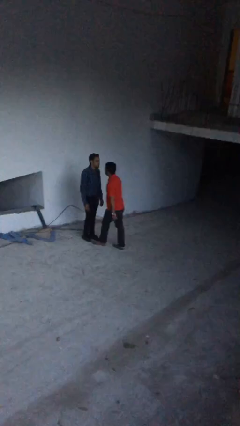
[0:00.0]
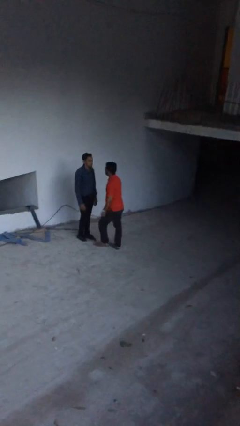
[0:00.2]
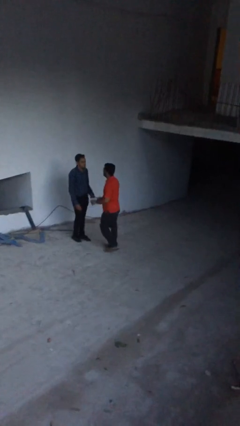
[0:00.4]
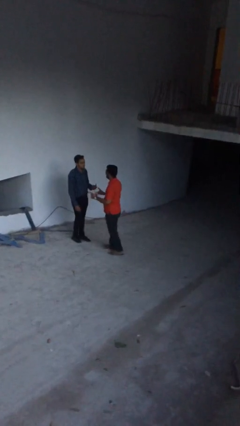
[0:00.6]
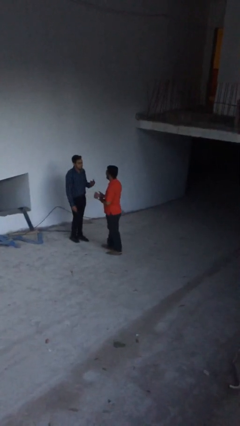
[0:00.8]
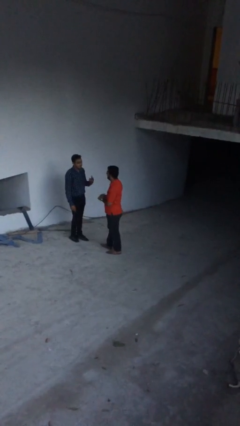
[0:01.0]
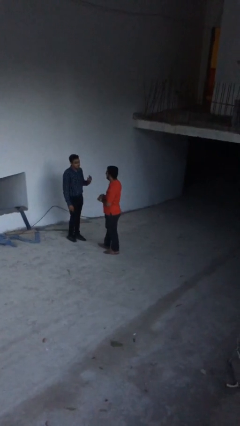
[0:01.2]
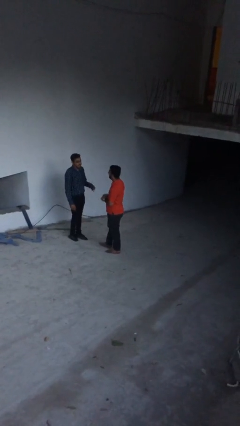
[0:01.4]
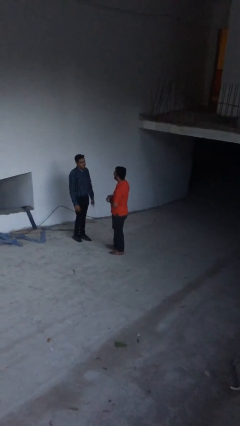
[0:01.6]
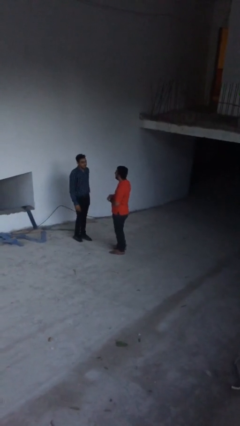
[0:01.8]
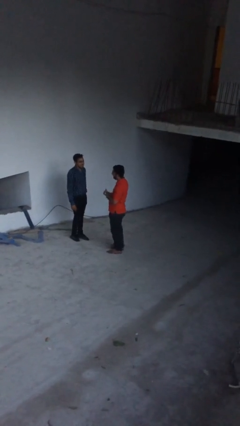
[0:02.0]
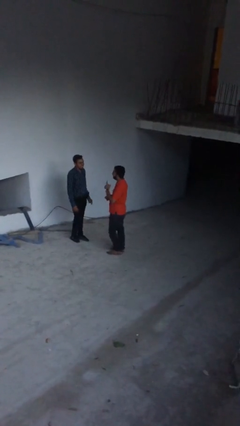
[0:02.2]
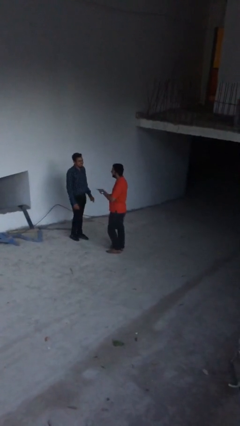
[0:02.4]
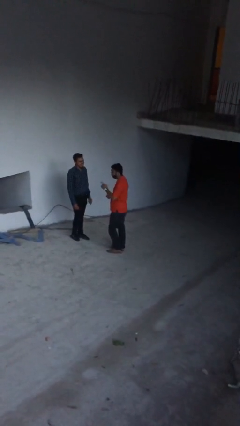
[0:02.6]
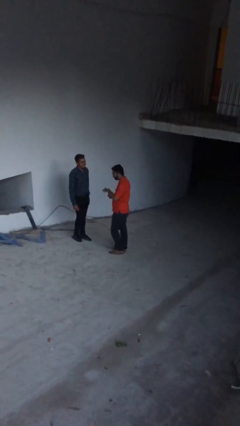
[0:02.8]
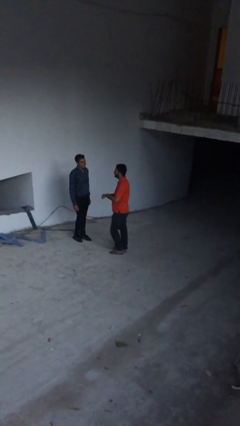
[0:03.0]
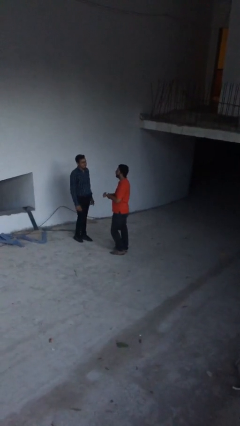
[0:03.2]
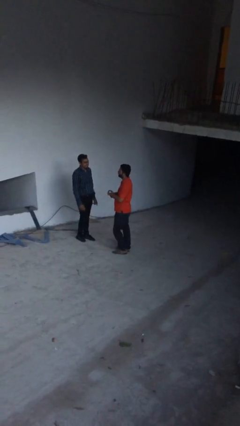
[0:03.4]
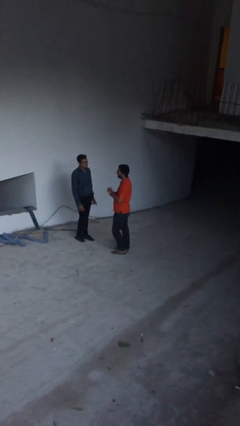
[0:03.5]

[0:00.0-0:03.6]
person talks to person

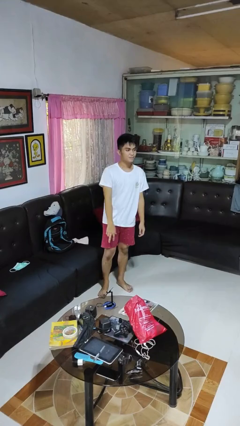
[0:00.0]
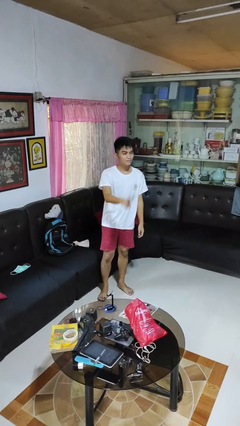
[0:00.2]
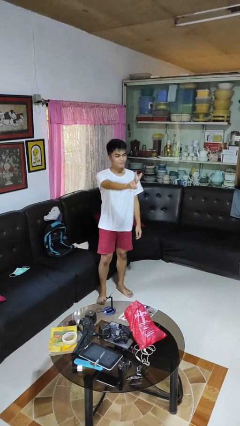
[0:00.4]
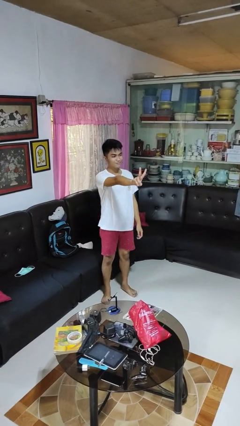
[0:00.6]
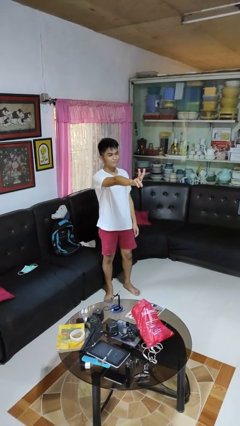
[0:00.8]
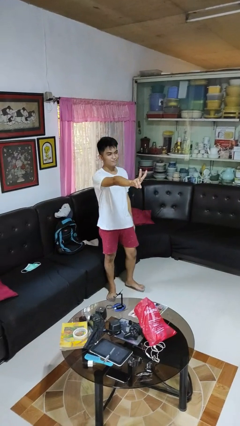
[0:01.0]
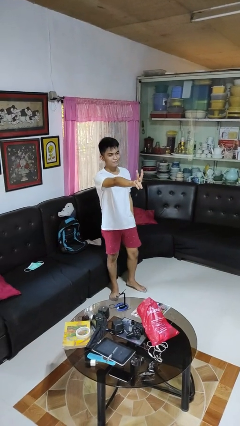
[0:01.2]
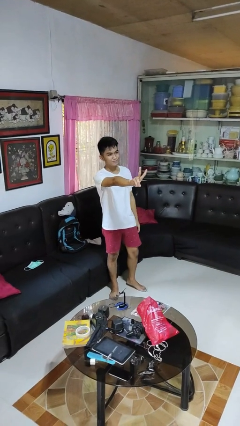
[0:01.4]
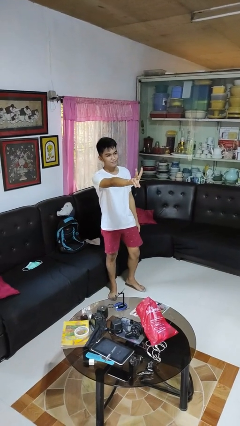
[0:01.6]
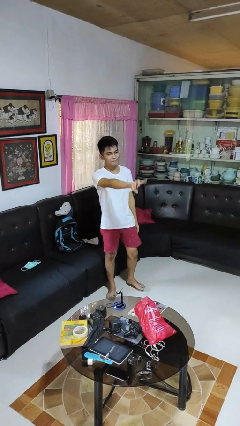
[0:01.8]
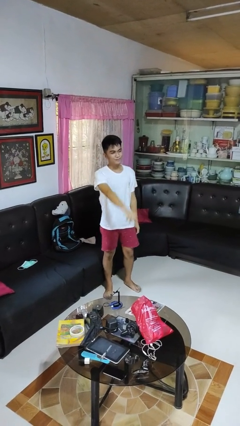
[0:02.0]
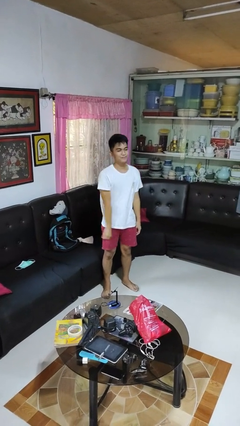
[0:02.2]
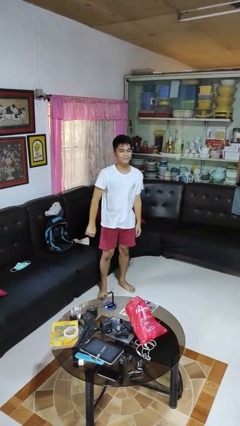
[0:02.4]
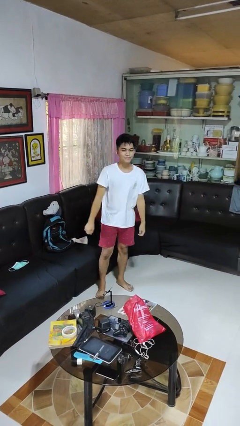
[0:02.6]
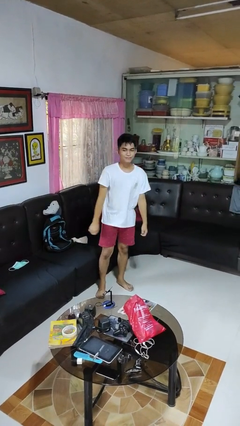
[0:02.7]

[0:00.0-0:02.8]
person gestures peace

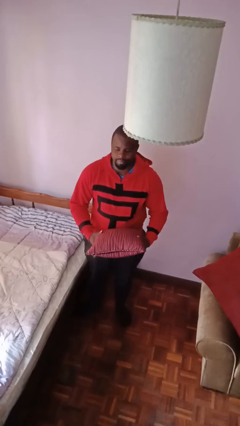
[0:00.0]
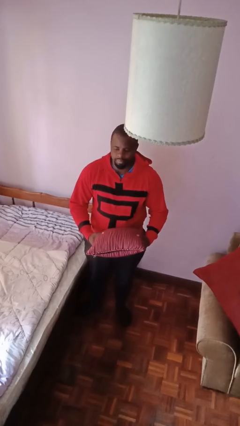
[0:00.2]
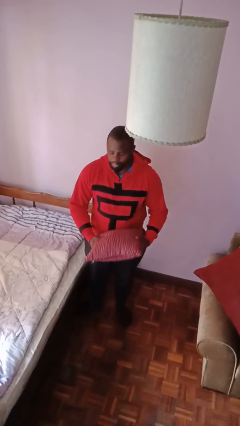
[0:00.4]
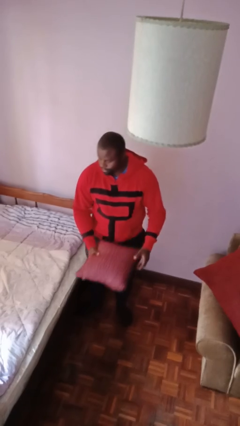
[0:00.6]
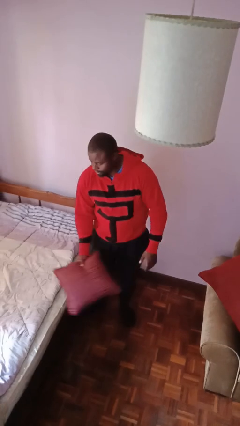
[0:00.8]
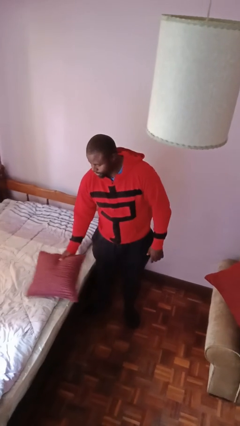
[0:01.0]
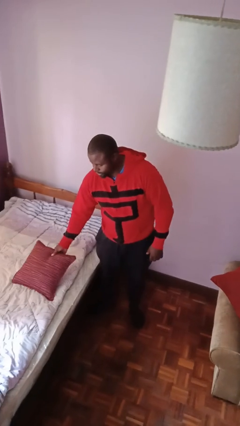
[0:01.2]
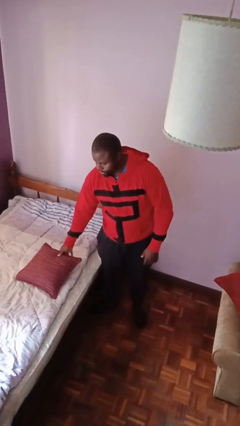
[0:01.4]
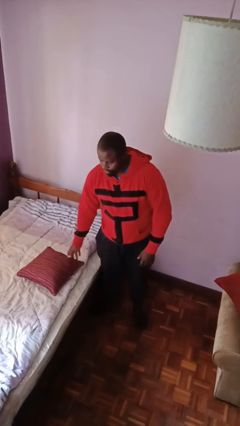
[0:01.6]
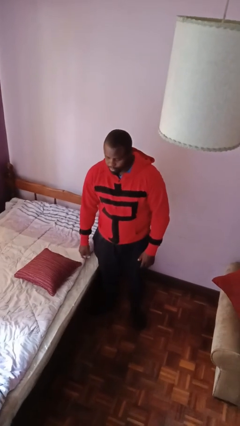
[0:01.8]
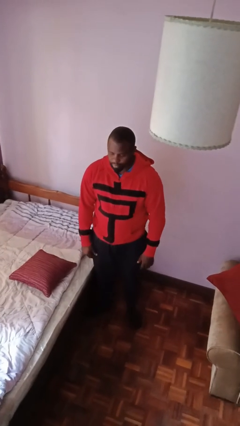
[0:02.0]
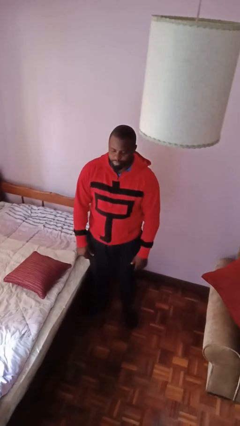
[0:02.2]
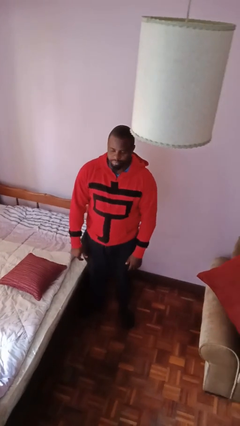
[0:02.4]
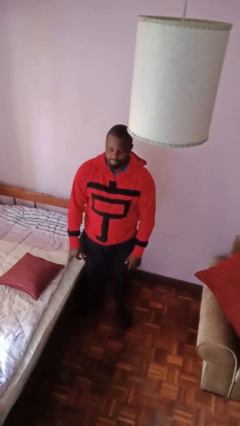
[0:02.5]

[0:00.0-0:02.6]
person puts down object on bed

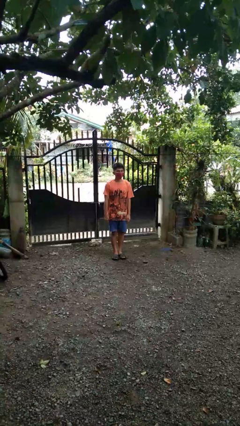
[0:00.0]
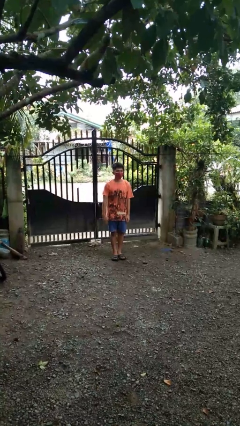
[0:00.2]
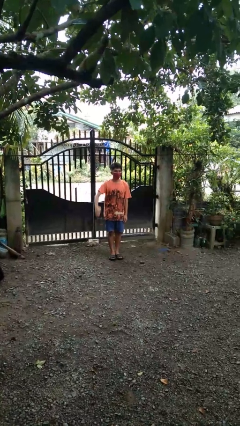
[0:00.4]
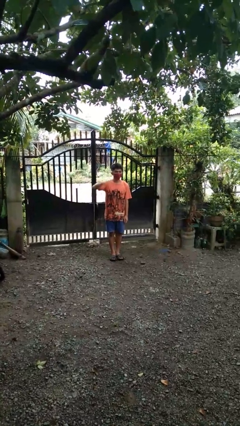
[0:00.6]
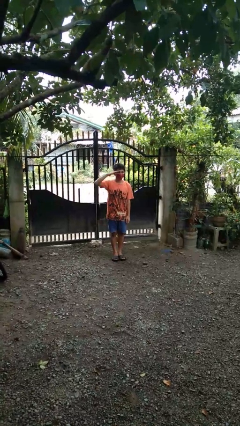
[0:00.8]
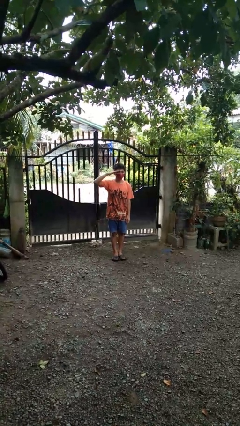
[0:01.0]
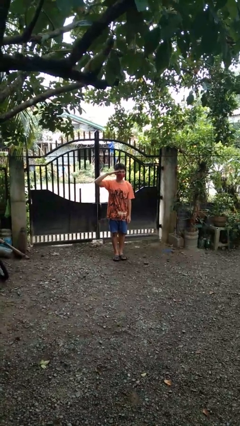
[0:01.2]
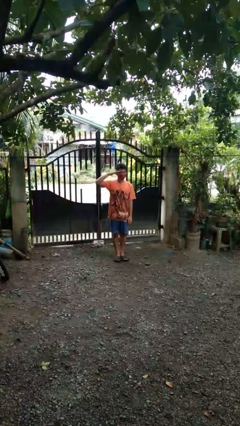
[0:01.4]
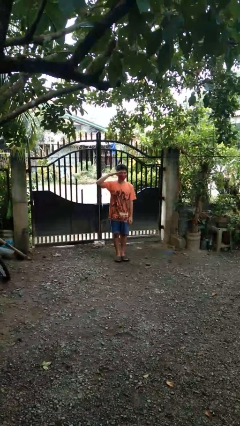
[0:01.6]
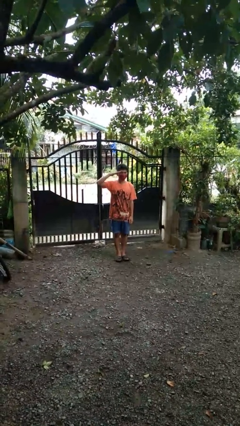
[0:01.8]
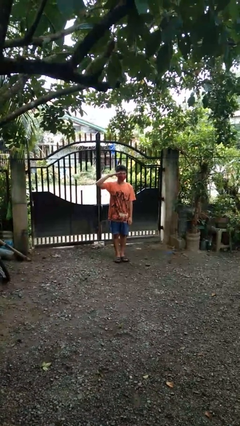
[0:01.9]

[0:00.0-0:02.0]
person salutes

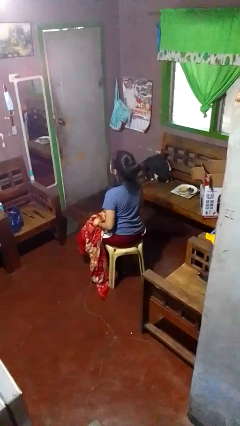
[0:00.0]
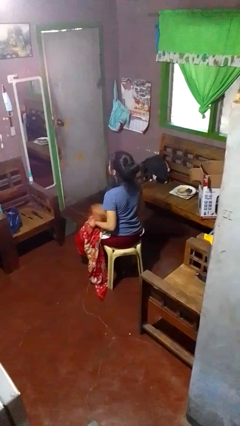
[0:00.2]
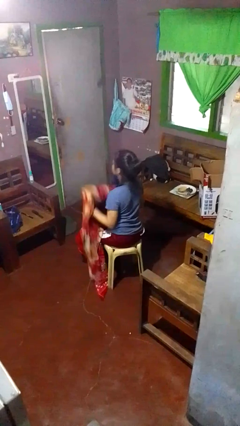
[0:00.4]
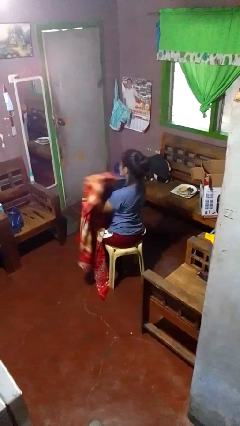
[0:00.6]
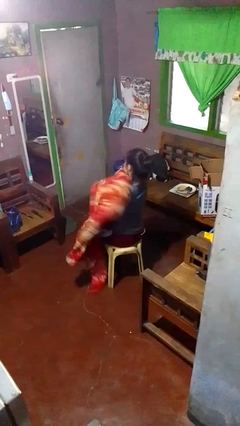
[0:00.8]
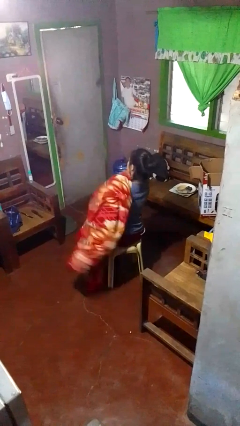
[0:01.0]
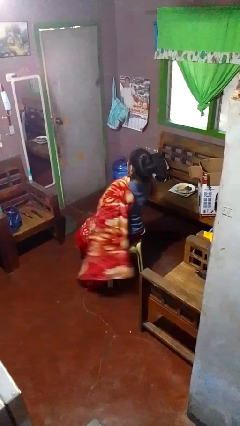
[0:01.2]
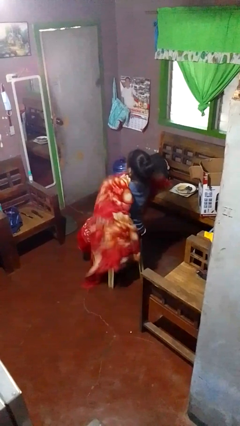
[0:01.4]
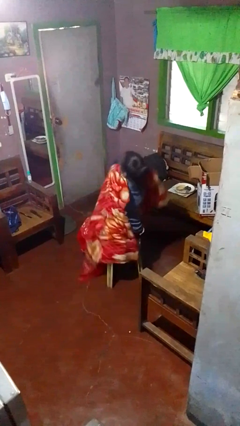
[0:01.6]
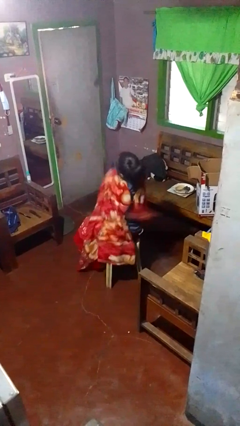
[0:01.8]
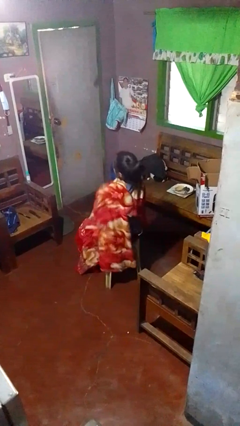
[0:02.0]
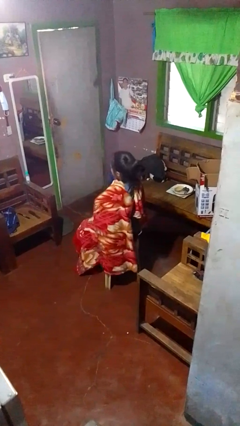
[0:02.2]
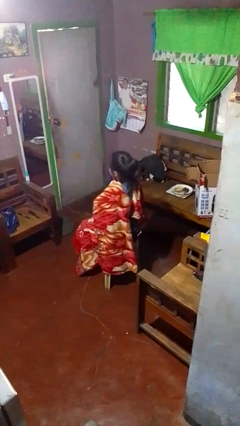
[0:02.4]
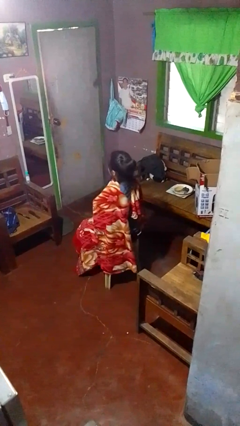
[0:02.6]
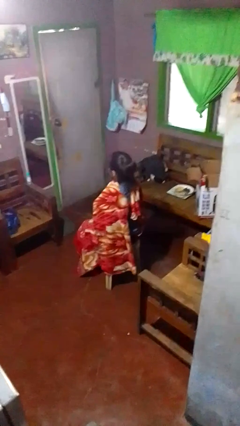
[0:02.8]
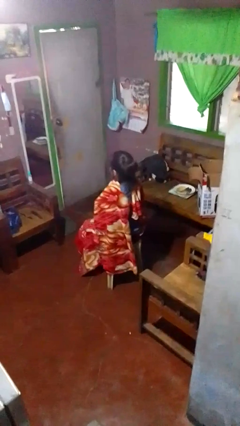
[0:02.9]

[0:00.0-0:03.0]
person covers with blanket

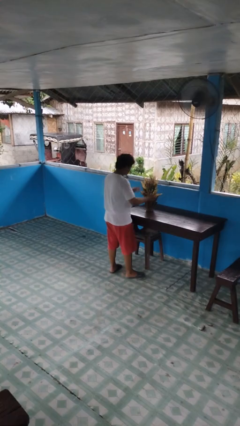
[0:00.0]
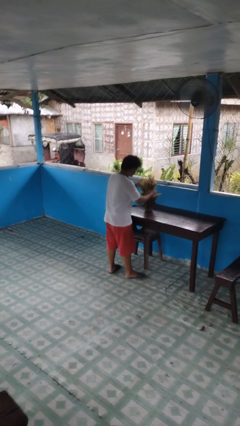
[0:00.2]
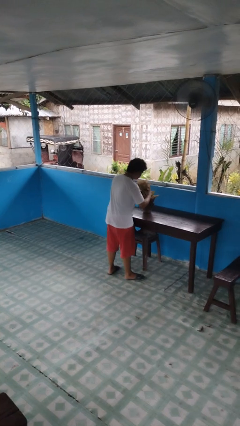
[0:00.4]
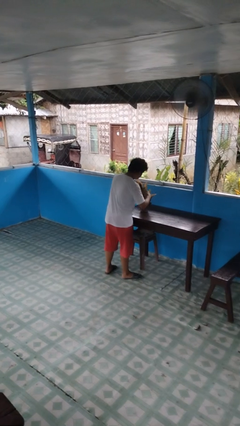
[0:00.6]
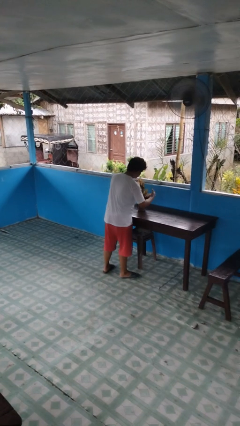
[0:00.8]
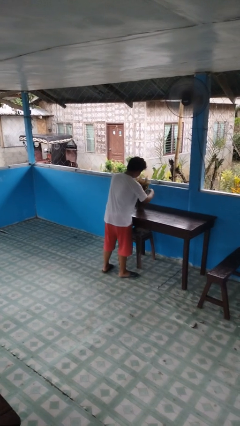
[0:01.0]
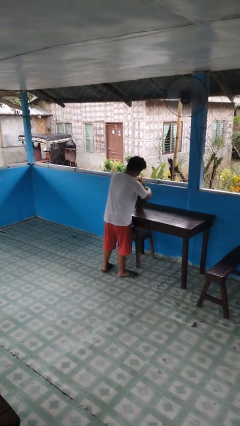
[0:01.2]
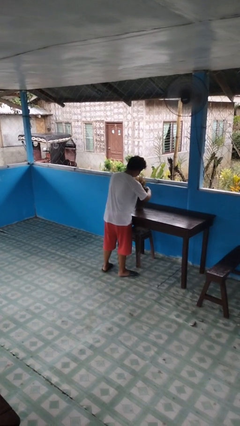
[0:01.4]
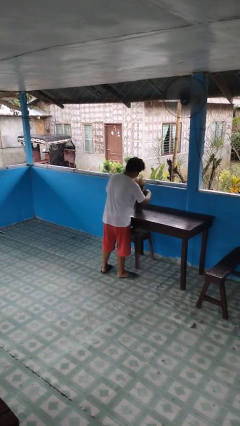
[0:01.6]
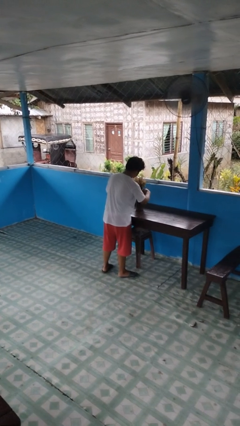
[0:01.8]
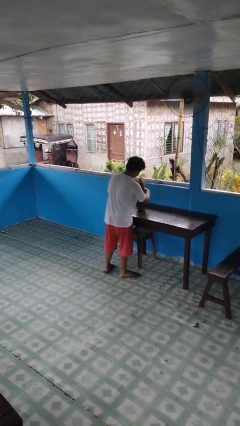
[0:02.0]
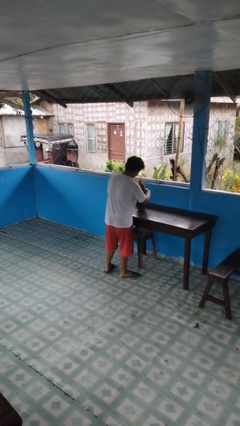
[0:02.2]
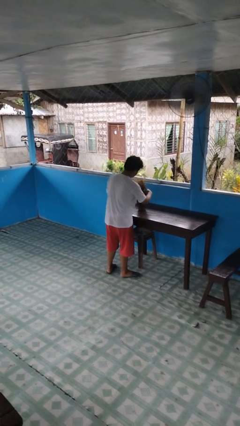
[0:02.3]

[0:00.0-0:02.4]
person arranges flowers in vase

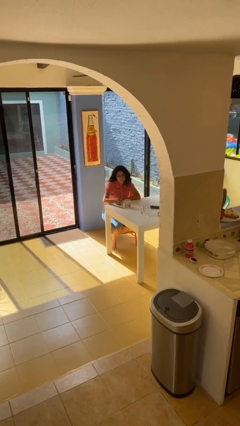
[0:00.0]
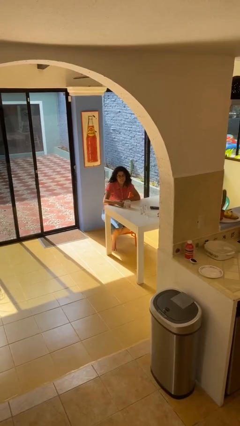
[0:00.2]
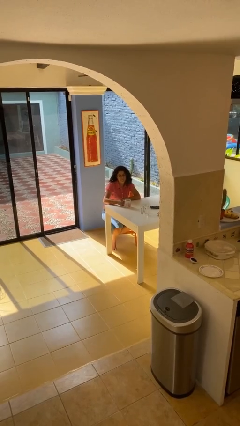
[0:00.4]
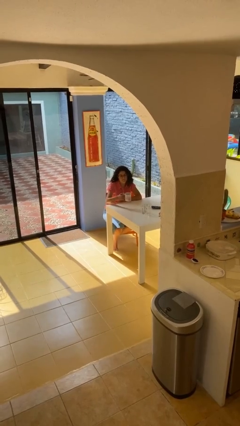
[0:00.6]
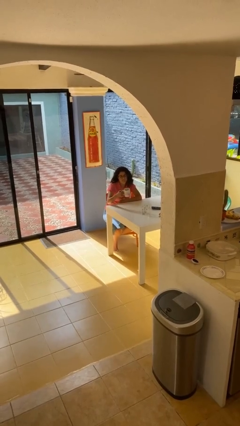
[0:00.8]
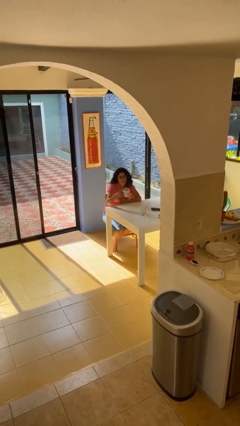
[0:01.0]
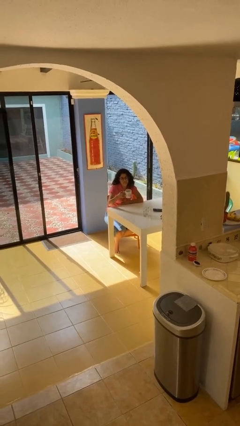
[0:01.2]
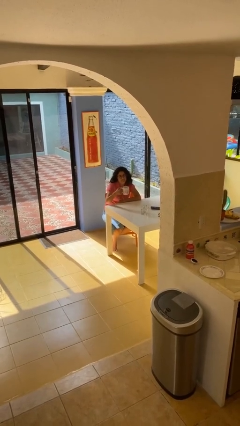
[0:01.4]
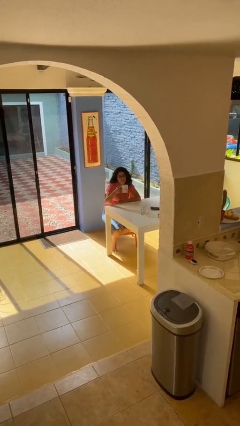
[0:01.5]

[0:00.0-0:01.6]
person picks up object from table
